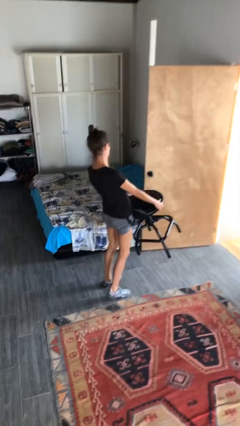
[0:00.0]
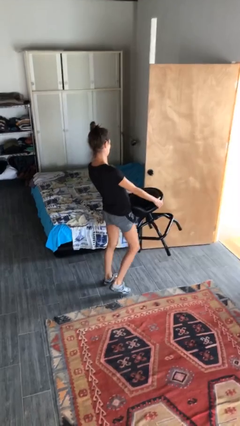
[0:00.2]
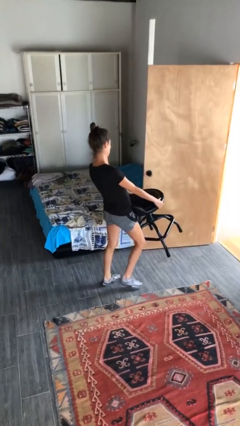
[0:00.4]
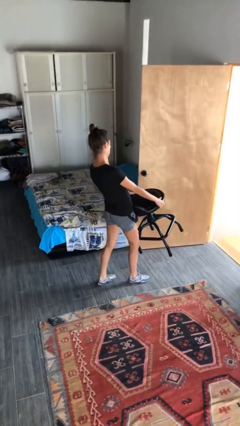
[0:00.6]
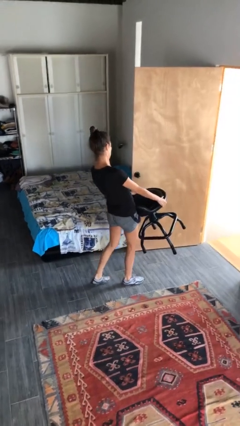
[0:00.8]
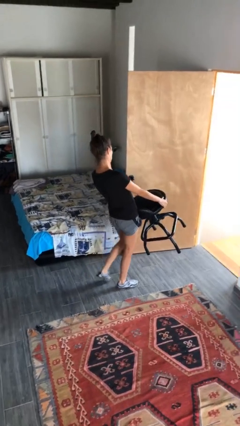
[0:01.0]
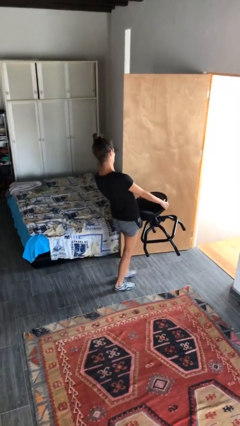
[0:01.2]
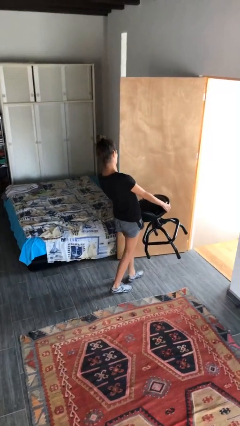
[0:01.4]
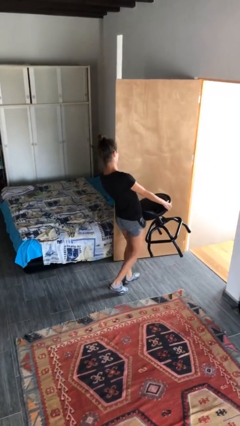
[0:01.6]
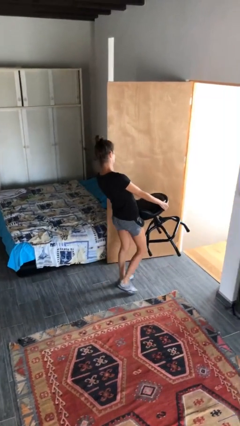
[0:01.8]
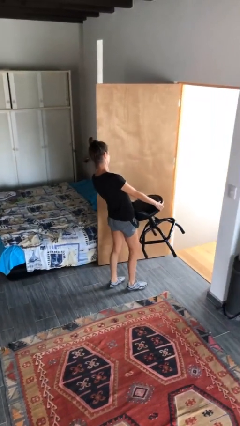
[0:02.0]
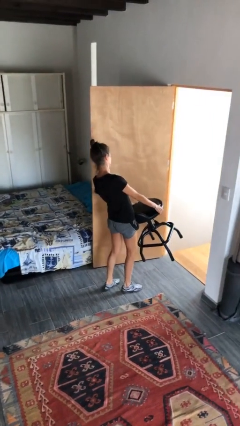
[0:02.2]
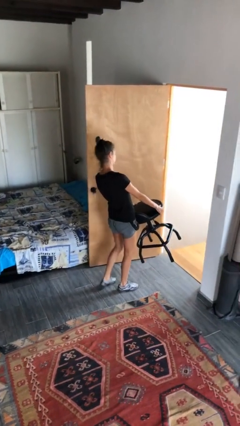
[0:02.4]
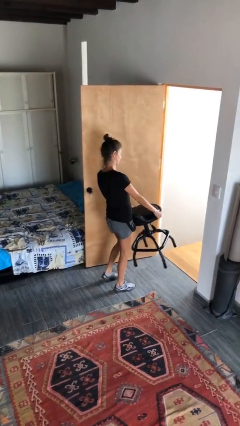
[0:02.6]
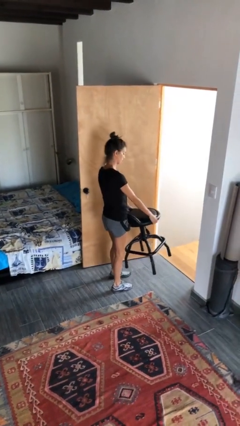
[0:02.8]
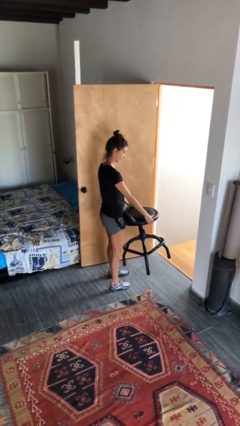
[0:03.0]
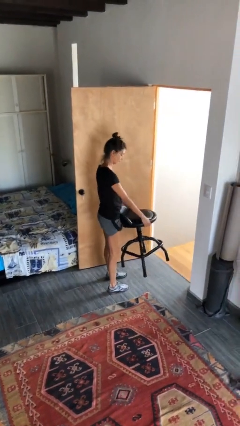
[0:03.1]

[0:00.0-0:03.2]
person carries furniture

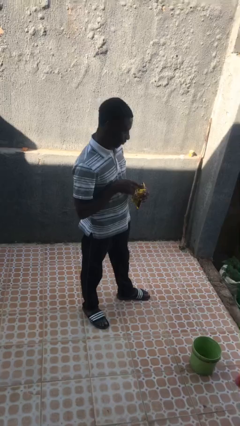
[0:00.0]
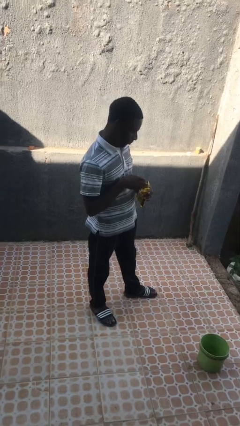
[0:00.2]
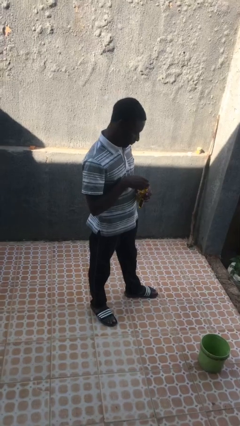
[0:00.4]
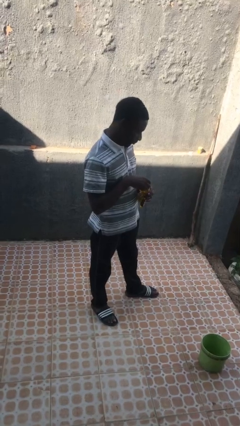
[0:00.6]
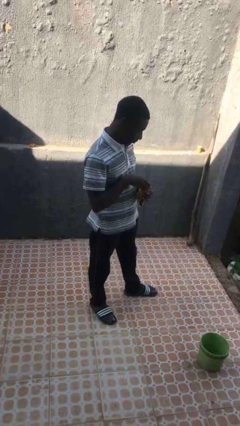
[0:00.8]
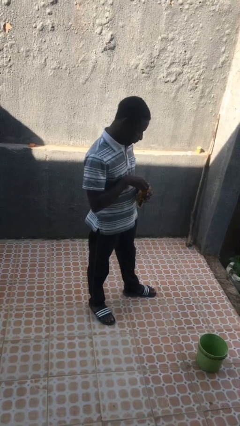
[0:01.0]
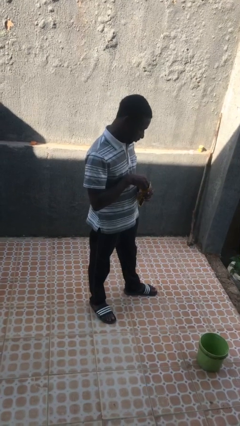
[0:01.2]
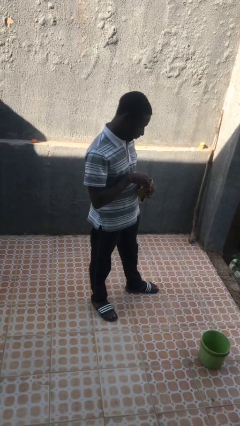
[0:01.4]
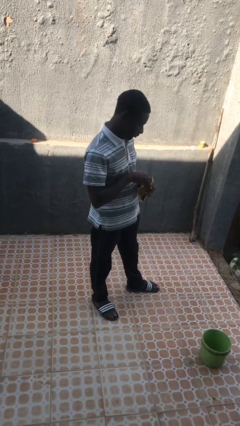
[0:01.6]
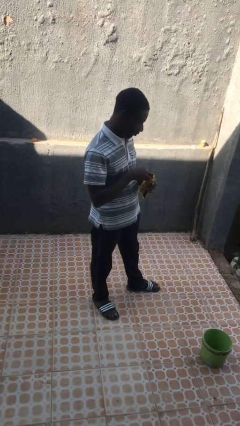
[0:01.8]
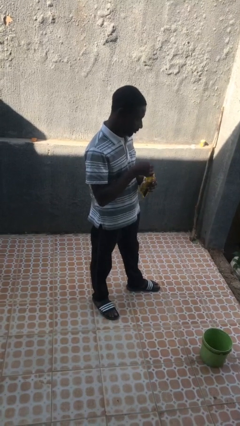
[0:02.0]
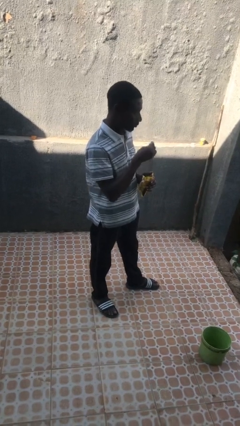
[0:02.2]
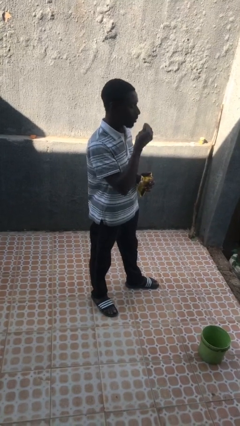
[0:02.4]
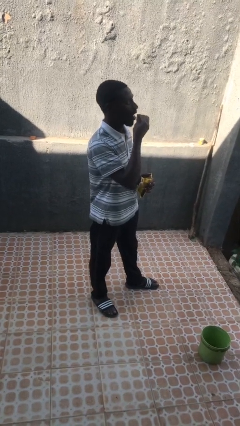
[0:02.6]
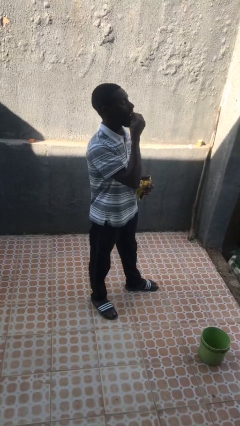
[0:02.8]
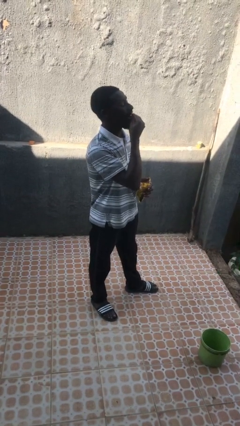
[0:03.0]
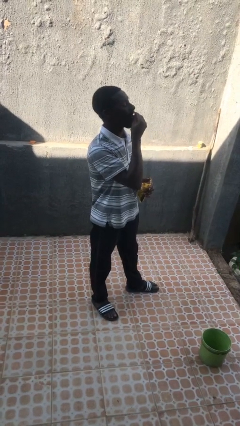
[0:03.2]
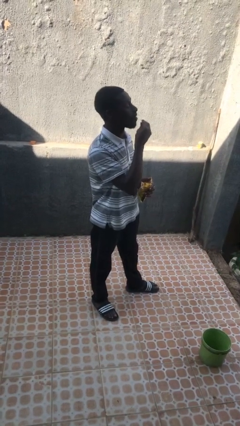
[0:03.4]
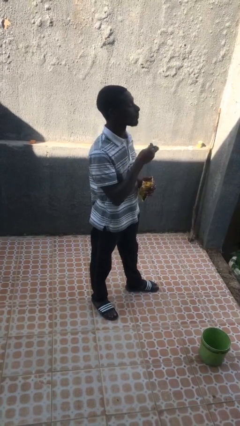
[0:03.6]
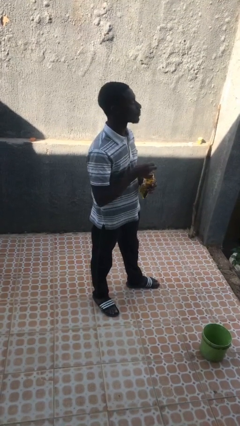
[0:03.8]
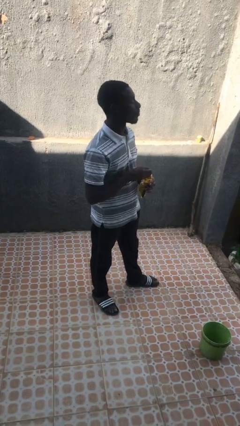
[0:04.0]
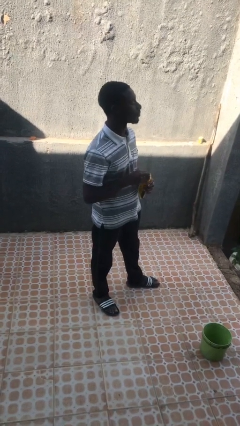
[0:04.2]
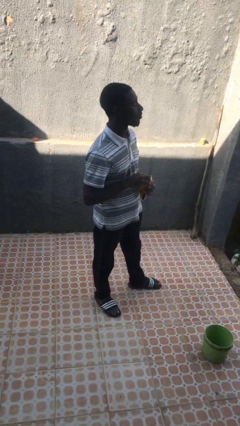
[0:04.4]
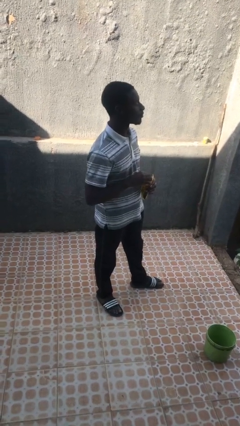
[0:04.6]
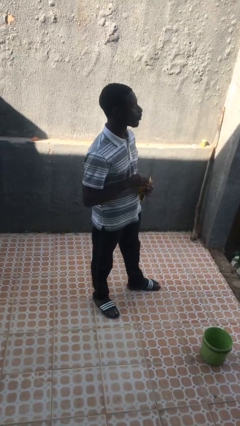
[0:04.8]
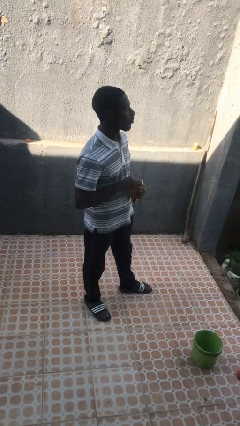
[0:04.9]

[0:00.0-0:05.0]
person eats snack from bag

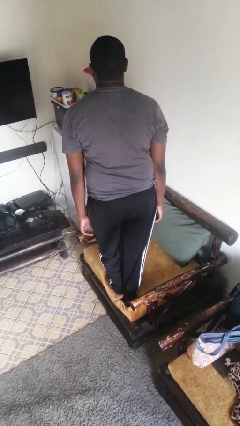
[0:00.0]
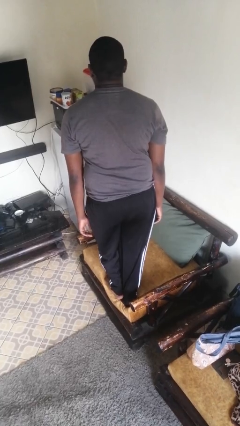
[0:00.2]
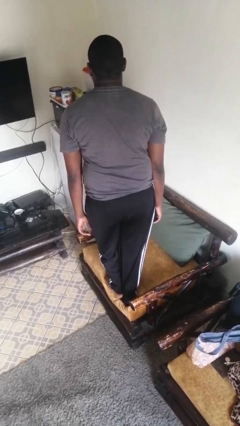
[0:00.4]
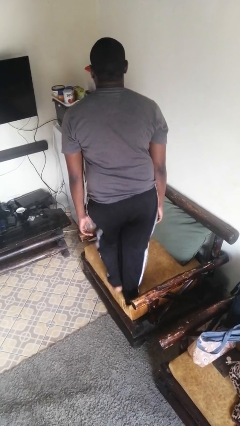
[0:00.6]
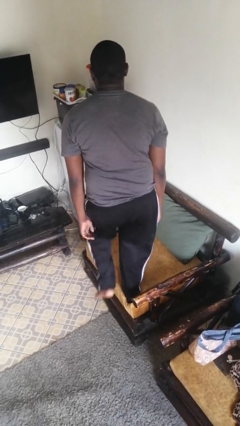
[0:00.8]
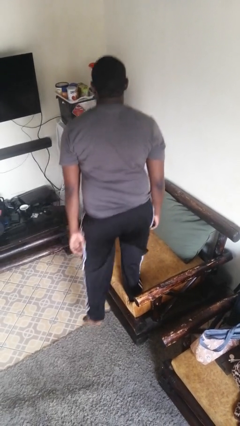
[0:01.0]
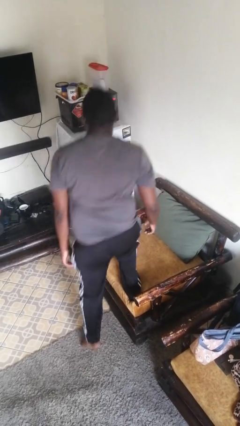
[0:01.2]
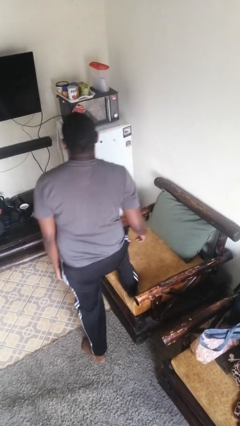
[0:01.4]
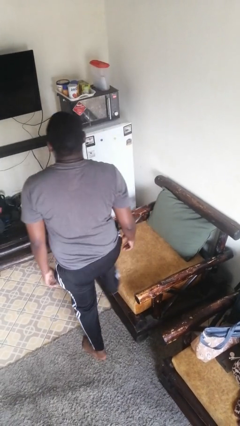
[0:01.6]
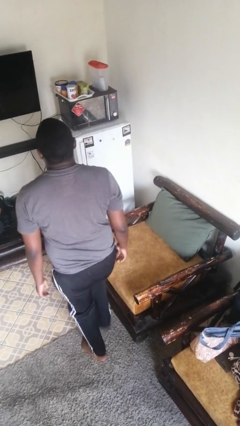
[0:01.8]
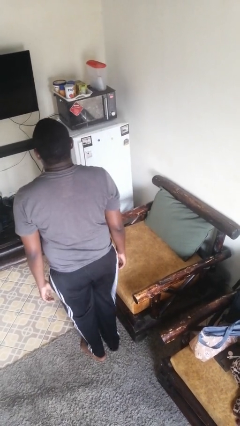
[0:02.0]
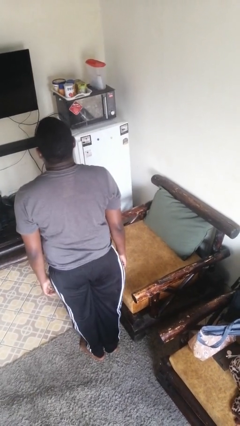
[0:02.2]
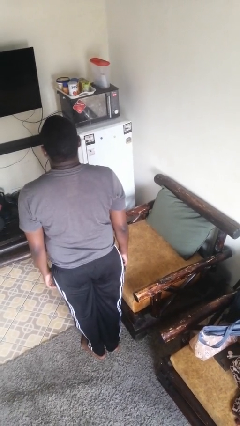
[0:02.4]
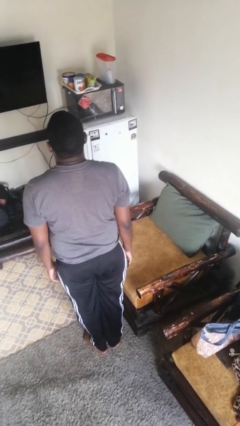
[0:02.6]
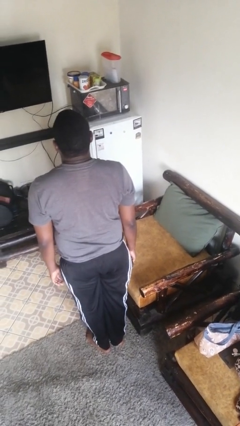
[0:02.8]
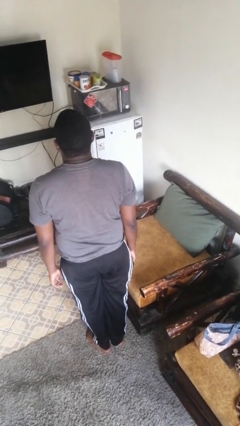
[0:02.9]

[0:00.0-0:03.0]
person climbs off couch

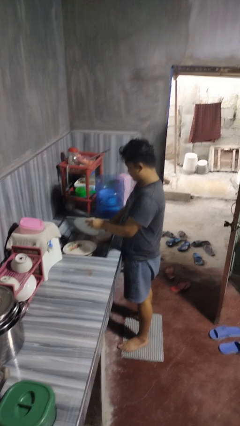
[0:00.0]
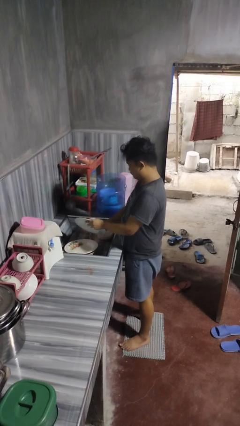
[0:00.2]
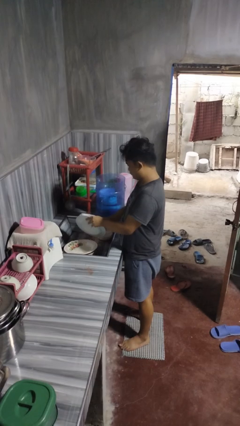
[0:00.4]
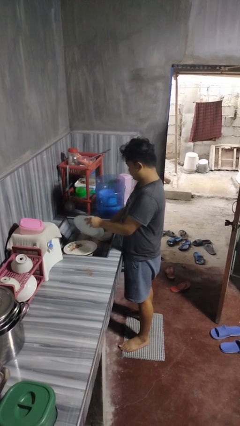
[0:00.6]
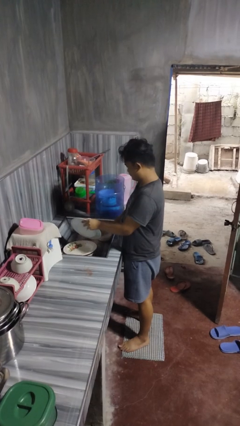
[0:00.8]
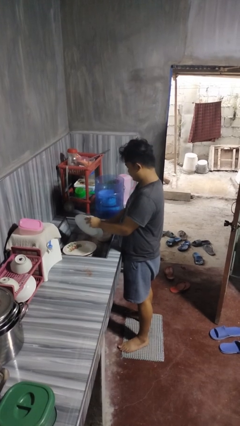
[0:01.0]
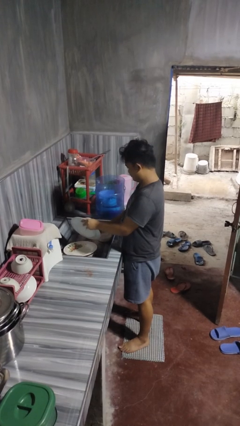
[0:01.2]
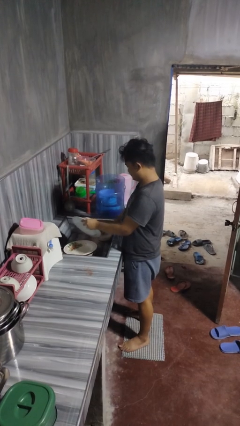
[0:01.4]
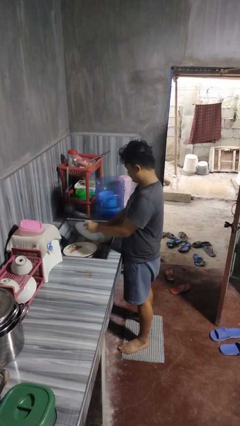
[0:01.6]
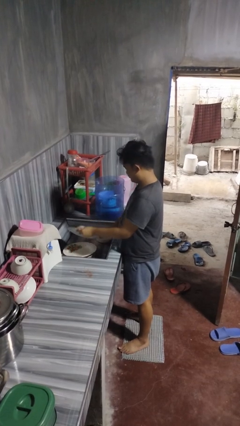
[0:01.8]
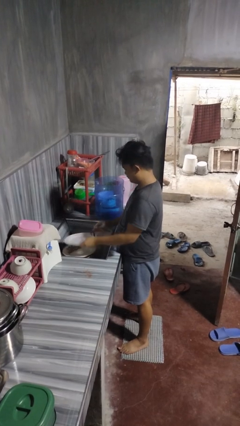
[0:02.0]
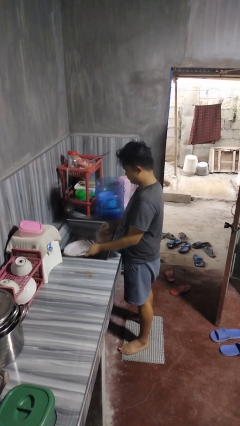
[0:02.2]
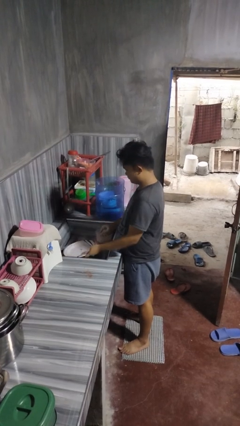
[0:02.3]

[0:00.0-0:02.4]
person washes dish

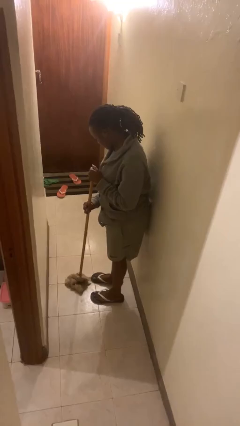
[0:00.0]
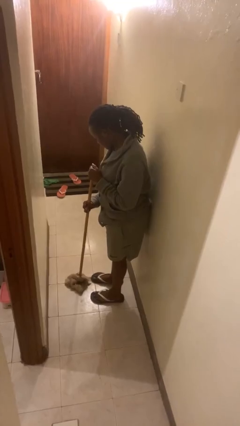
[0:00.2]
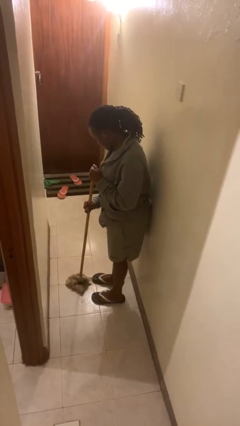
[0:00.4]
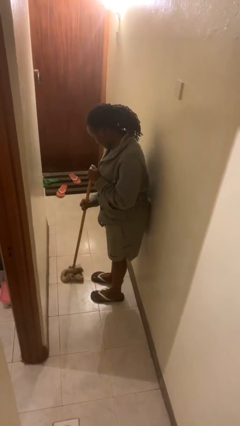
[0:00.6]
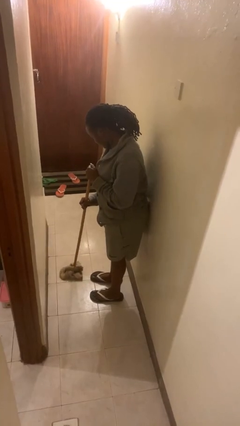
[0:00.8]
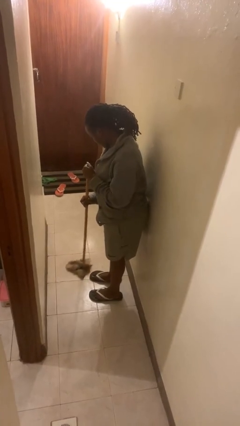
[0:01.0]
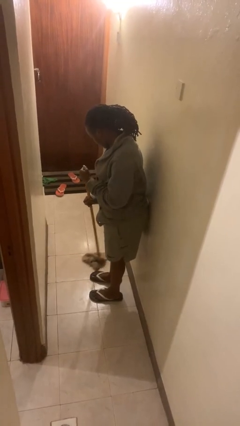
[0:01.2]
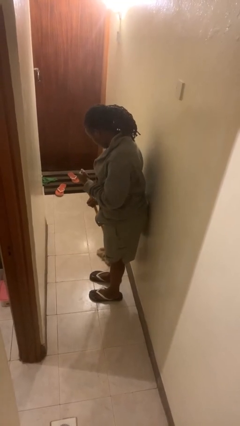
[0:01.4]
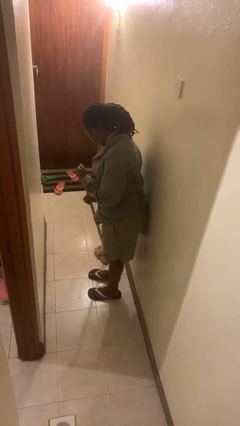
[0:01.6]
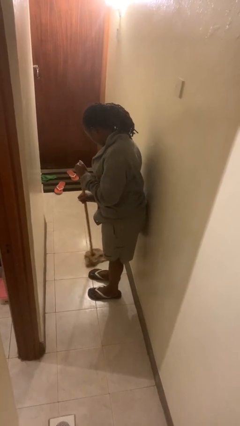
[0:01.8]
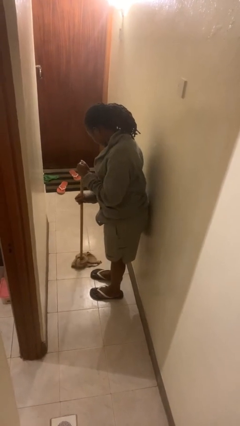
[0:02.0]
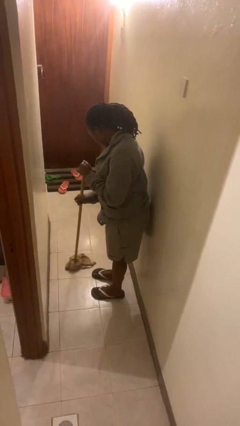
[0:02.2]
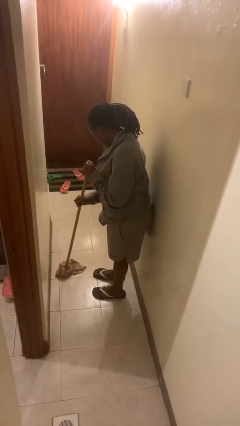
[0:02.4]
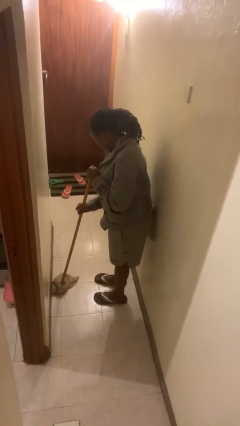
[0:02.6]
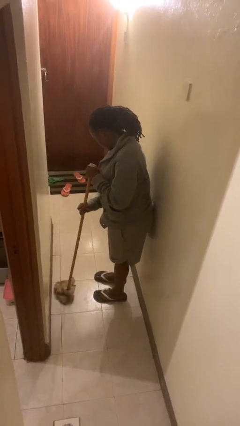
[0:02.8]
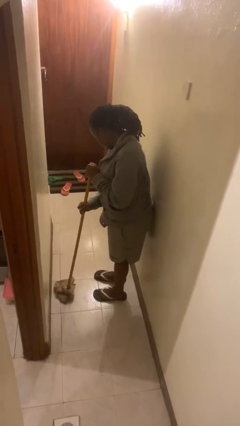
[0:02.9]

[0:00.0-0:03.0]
person mops

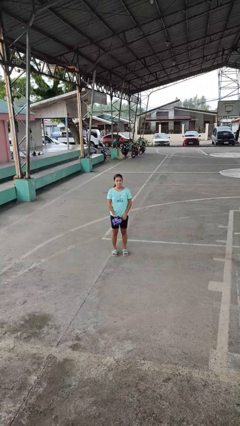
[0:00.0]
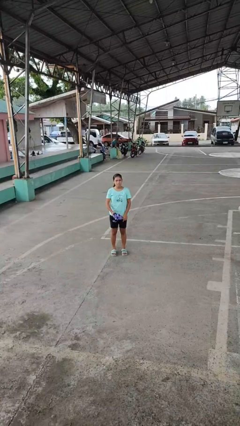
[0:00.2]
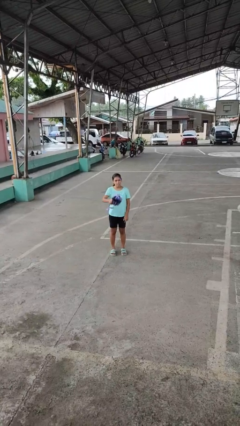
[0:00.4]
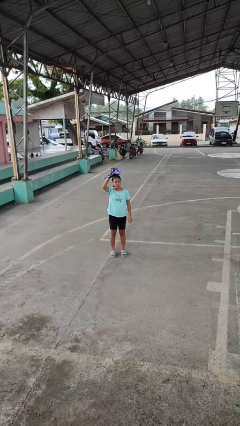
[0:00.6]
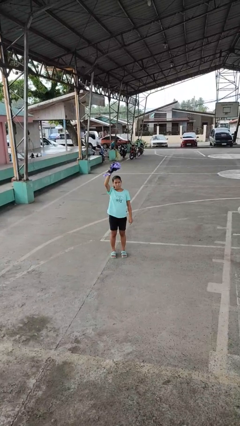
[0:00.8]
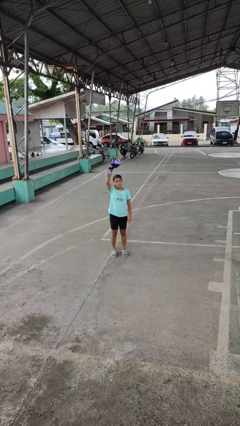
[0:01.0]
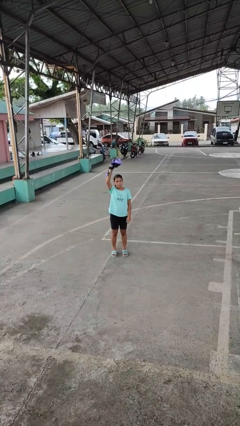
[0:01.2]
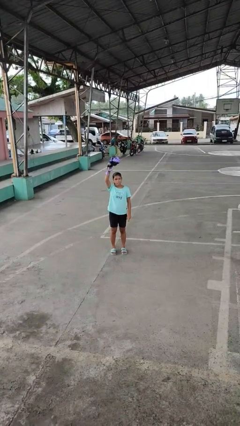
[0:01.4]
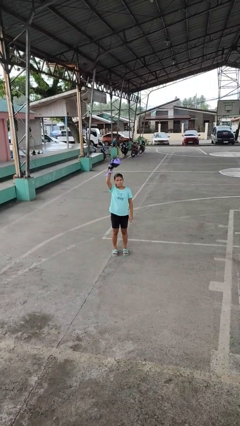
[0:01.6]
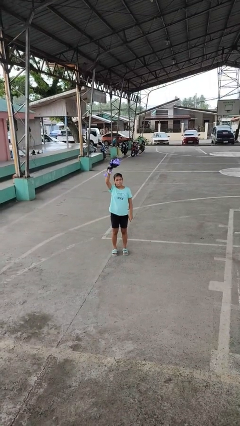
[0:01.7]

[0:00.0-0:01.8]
person holds object above head
